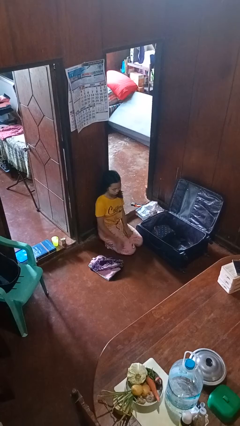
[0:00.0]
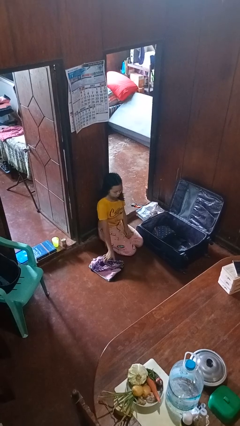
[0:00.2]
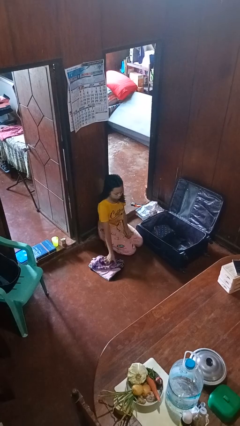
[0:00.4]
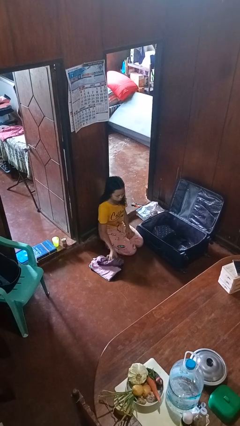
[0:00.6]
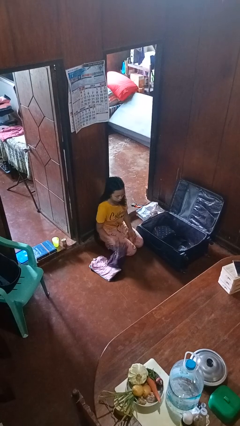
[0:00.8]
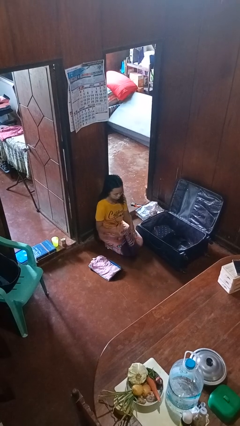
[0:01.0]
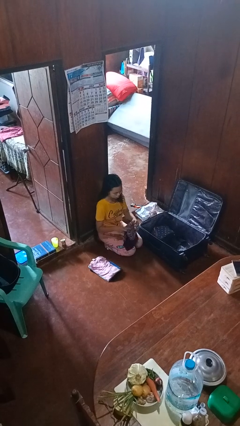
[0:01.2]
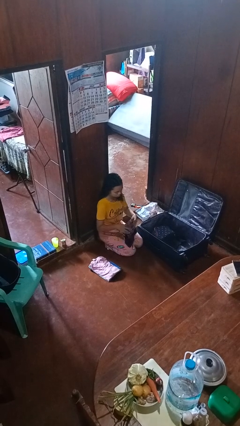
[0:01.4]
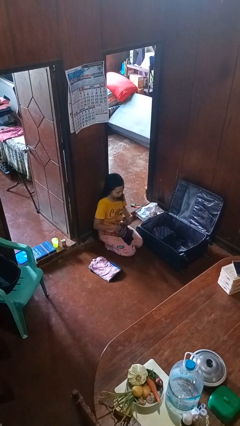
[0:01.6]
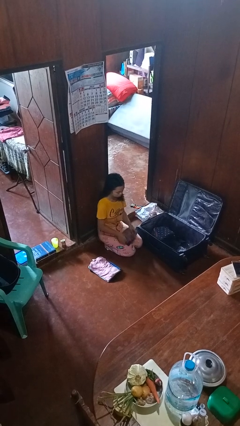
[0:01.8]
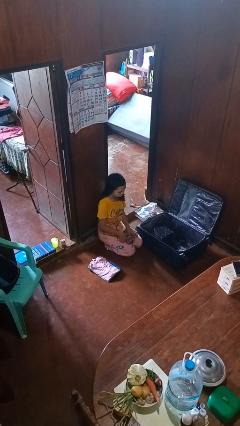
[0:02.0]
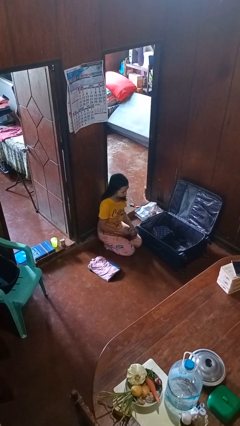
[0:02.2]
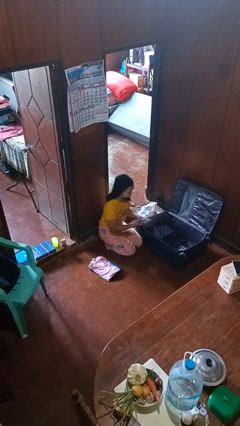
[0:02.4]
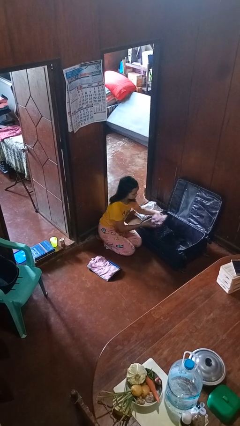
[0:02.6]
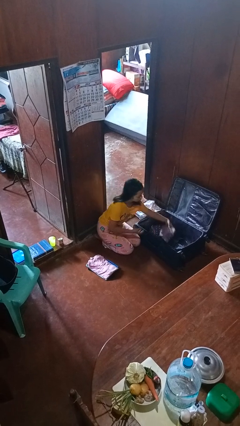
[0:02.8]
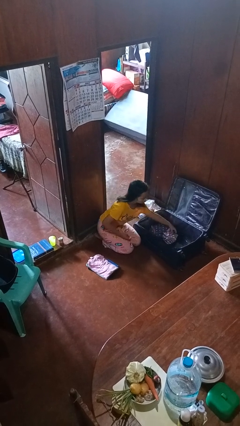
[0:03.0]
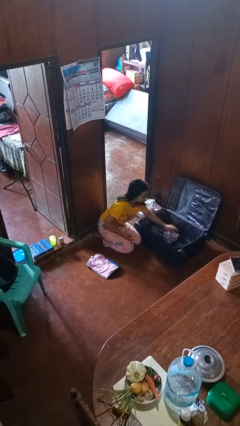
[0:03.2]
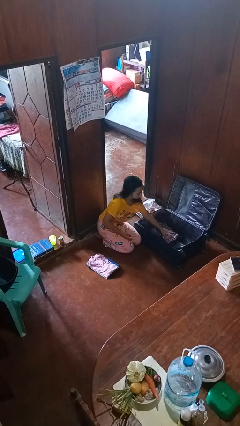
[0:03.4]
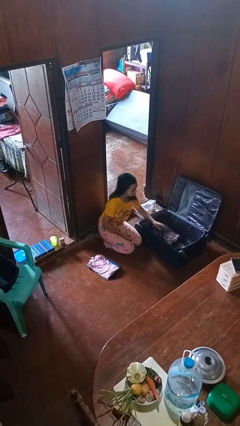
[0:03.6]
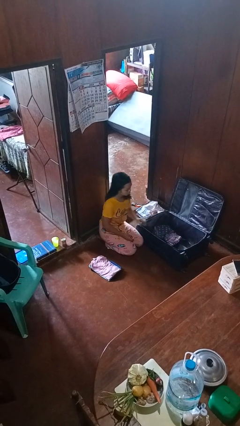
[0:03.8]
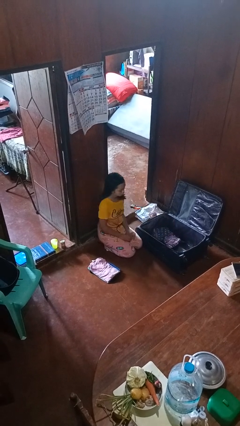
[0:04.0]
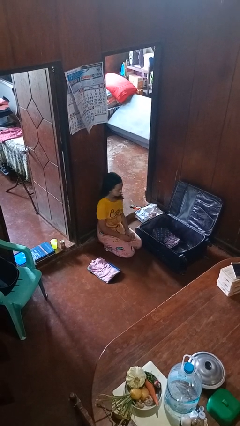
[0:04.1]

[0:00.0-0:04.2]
person loads clothes into suitcase

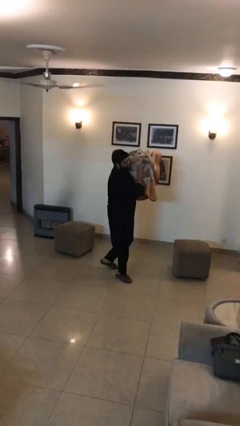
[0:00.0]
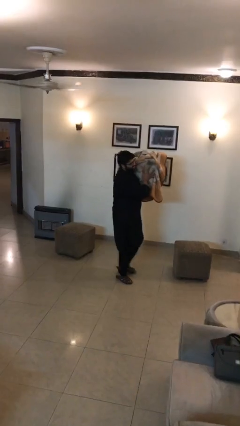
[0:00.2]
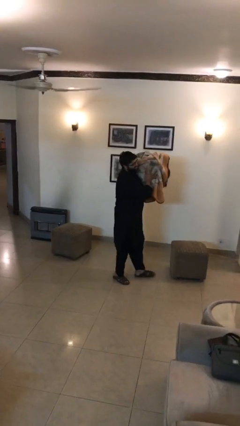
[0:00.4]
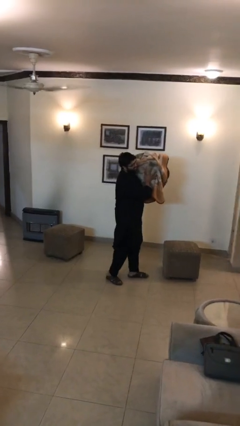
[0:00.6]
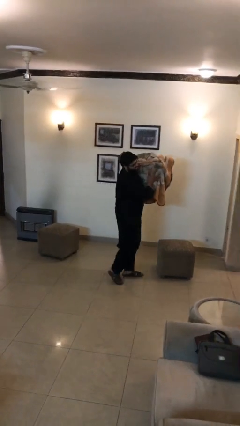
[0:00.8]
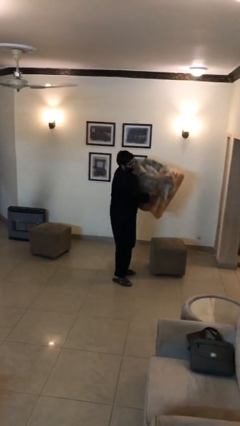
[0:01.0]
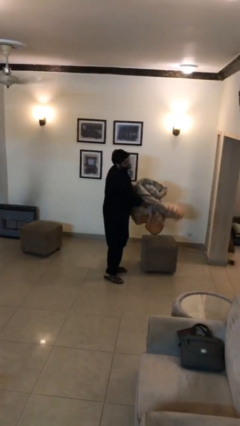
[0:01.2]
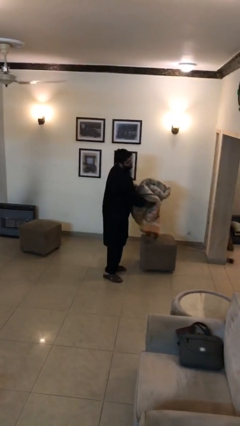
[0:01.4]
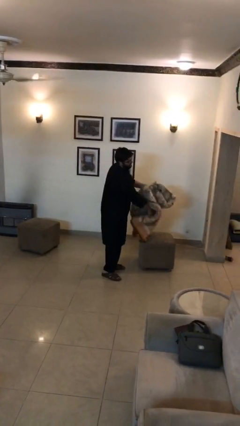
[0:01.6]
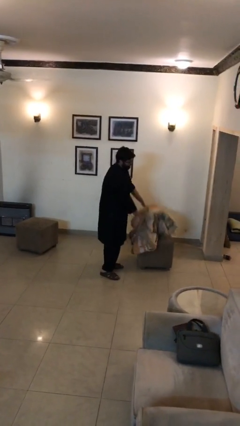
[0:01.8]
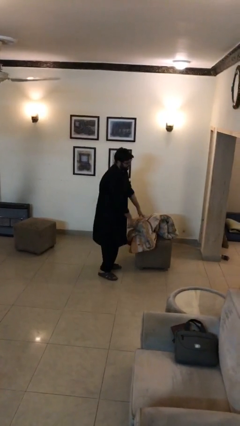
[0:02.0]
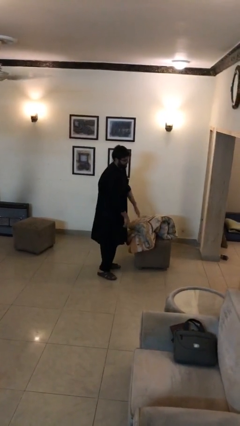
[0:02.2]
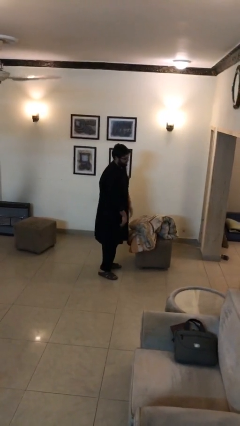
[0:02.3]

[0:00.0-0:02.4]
person puts down object on floor

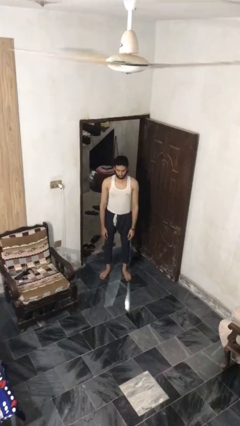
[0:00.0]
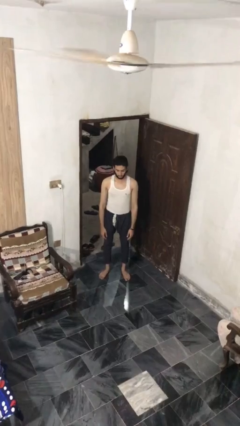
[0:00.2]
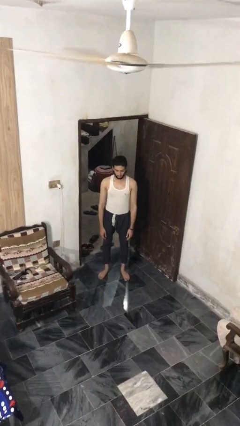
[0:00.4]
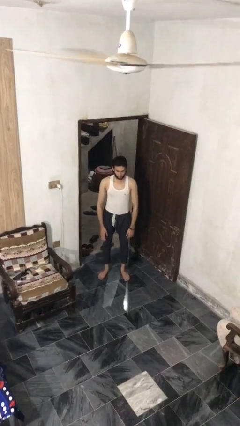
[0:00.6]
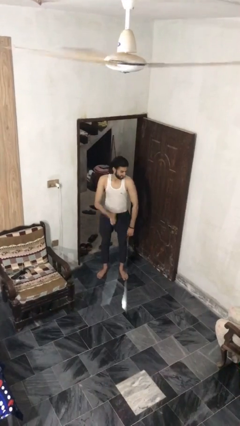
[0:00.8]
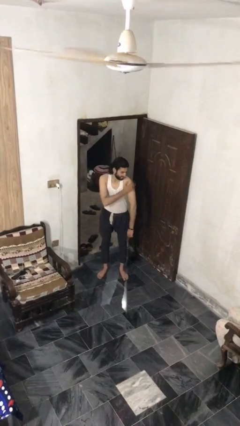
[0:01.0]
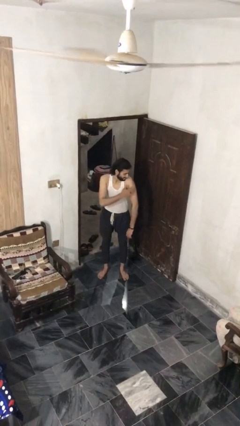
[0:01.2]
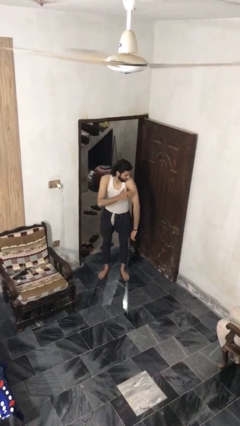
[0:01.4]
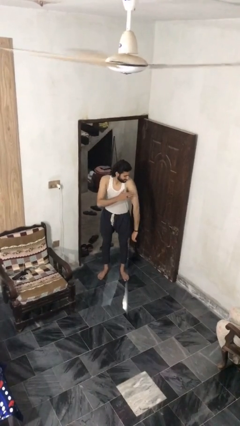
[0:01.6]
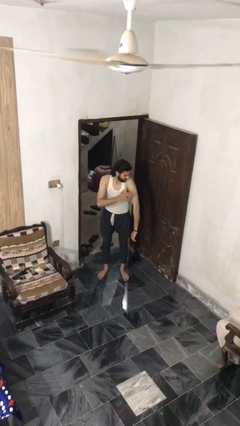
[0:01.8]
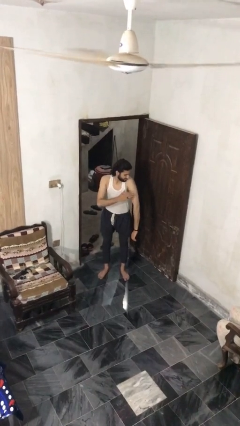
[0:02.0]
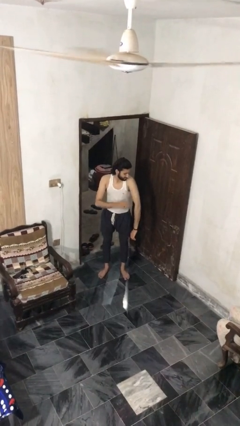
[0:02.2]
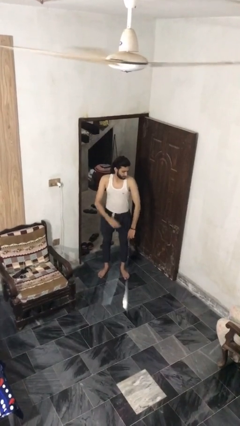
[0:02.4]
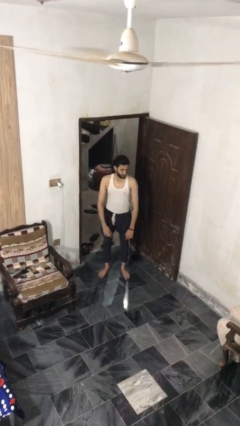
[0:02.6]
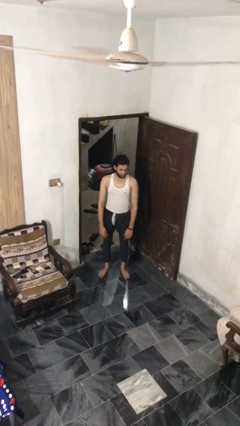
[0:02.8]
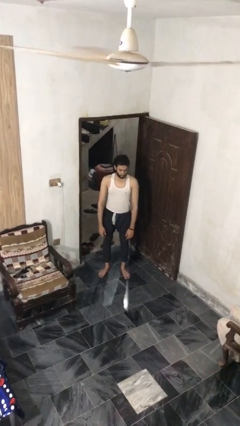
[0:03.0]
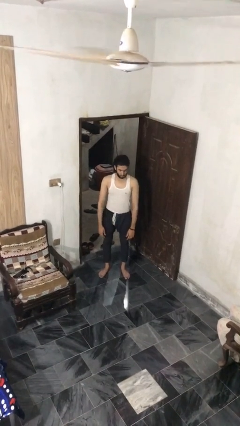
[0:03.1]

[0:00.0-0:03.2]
person swats bug

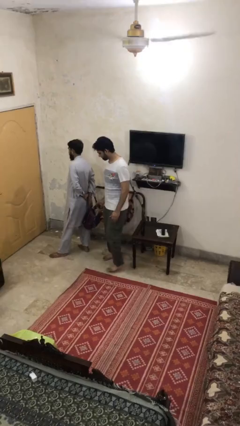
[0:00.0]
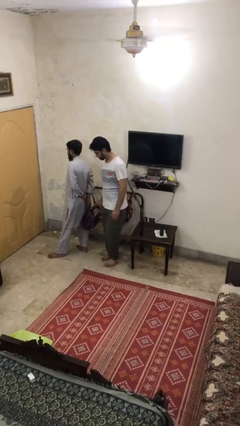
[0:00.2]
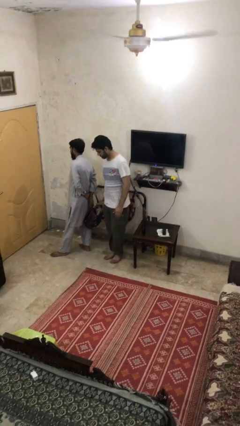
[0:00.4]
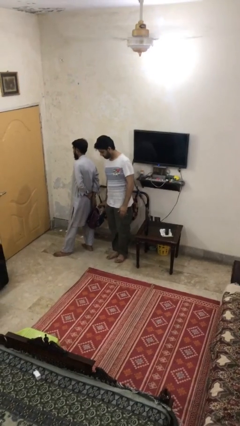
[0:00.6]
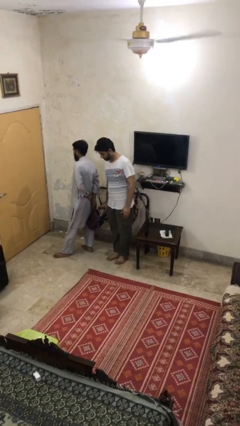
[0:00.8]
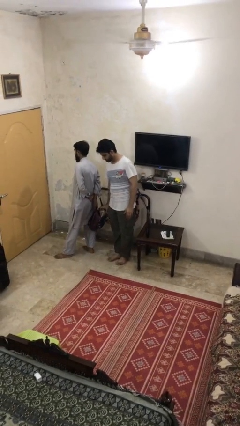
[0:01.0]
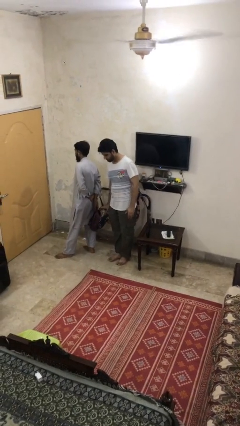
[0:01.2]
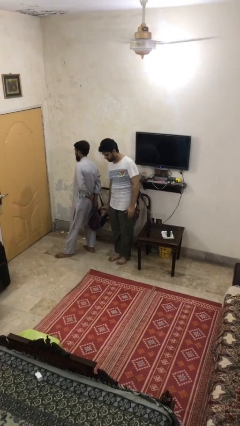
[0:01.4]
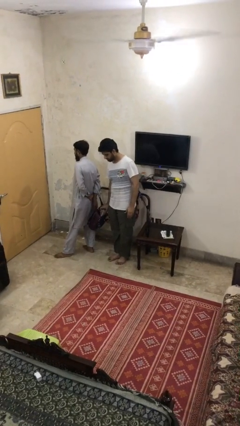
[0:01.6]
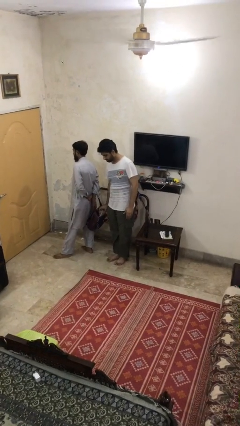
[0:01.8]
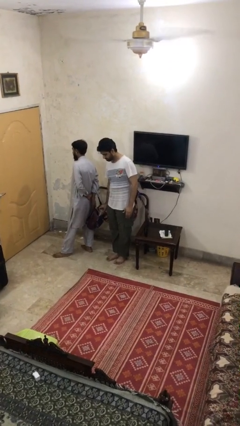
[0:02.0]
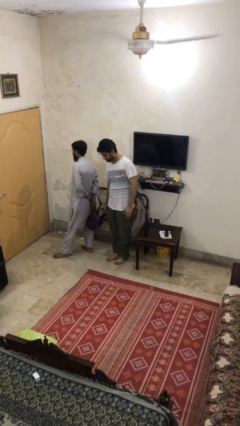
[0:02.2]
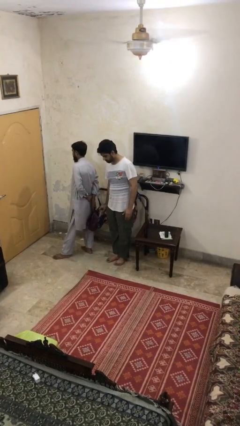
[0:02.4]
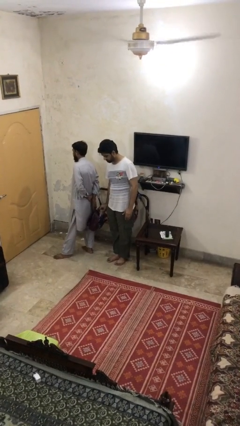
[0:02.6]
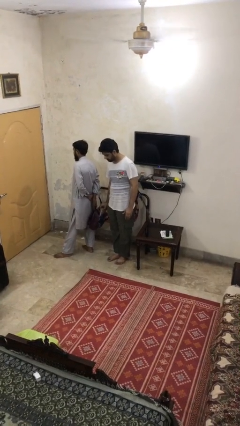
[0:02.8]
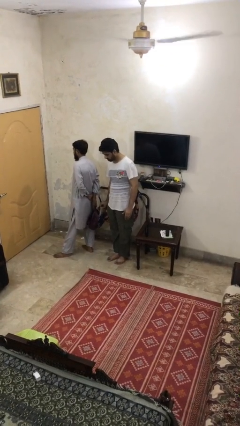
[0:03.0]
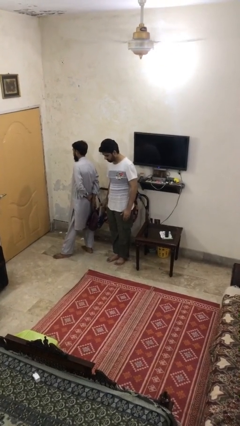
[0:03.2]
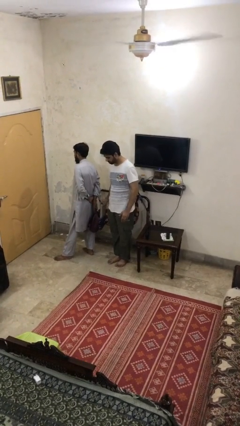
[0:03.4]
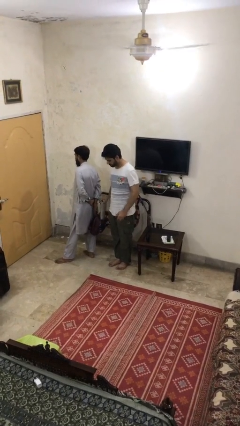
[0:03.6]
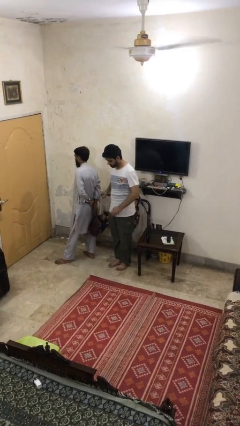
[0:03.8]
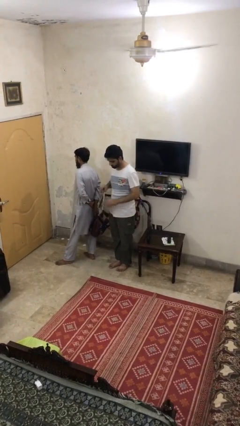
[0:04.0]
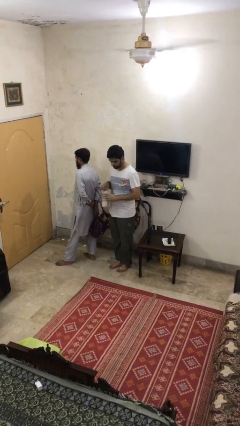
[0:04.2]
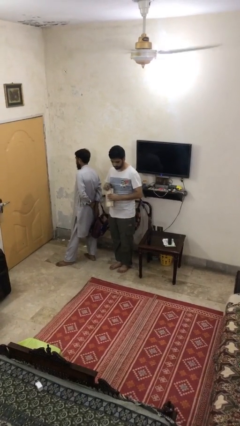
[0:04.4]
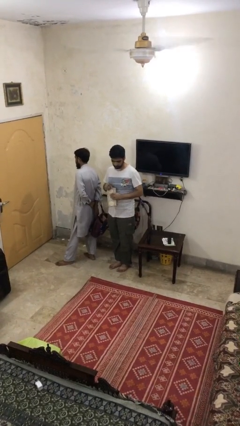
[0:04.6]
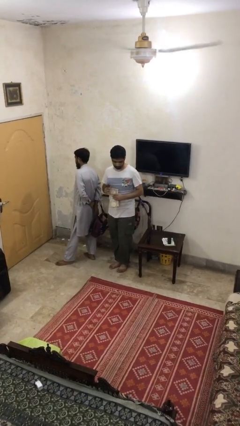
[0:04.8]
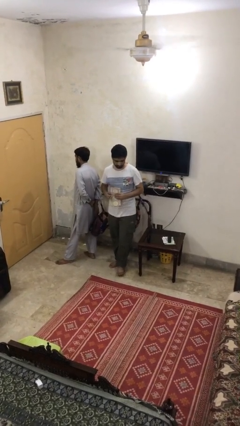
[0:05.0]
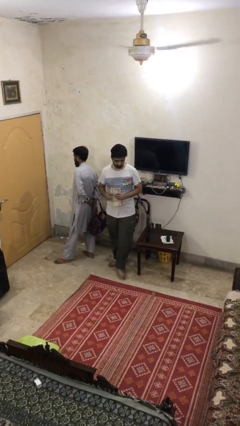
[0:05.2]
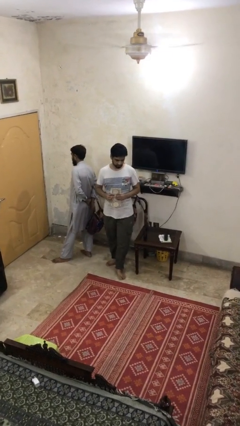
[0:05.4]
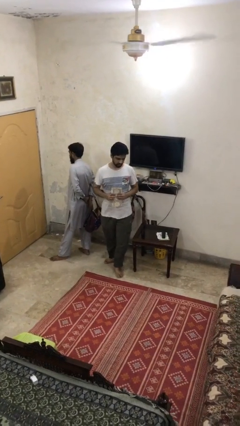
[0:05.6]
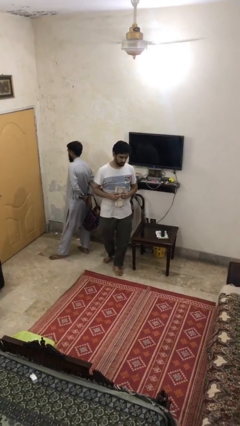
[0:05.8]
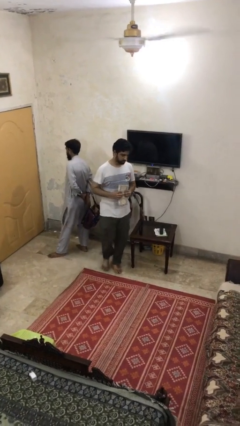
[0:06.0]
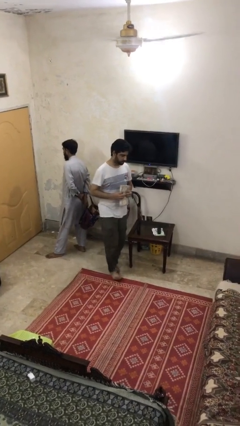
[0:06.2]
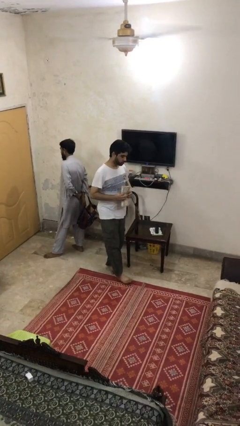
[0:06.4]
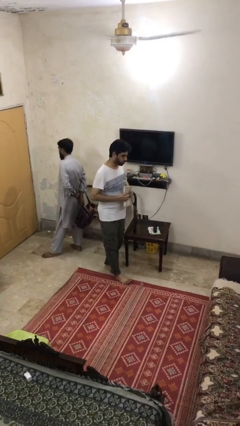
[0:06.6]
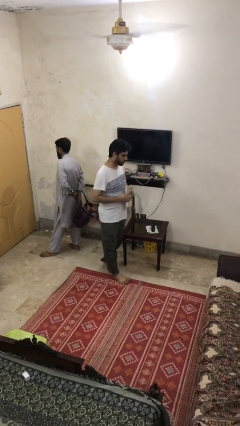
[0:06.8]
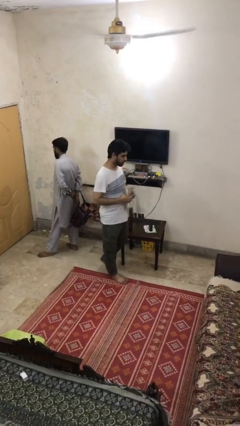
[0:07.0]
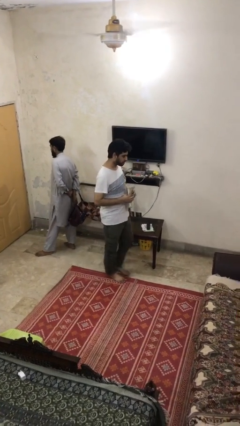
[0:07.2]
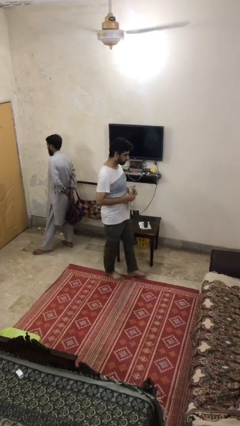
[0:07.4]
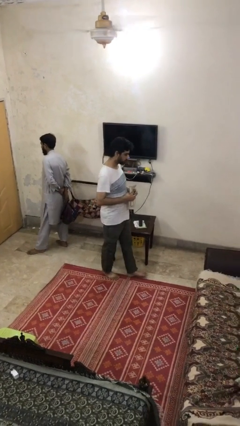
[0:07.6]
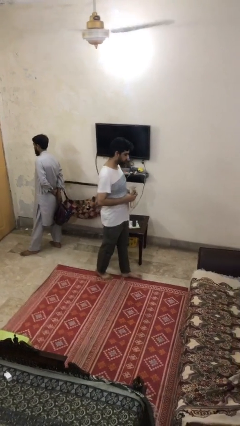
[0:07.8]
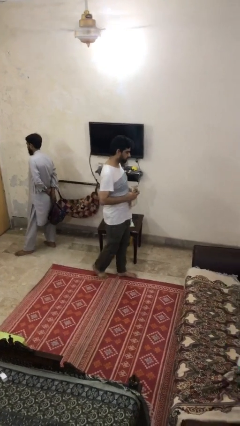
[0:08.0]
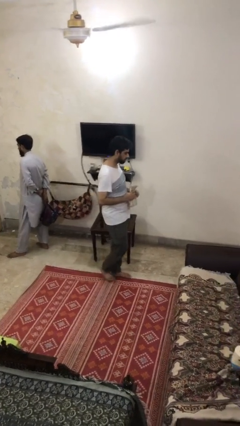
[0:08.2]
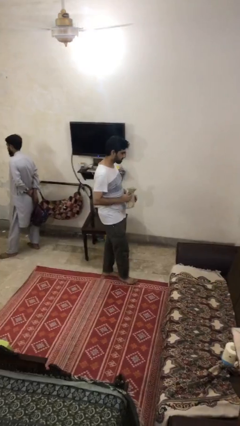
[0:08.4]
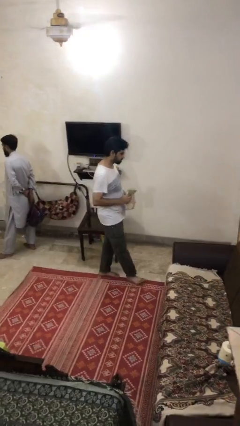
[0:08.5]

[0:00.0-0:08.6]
person steals object from person
